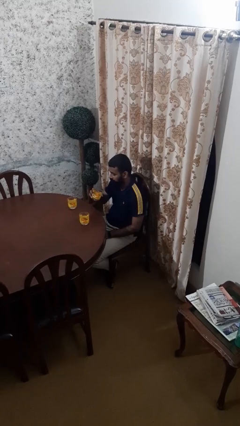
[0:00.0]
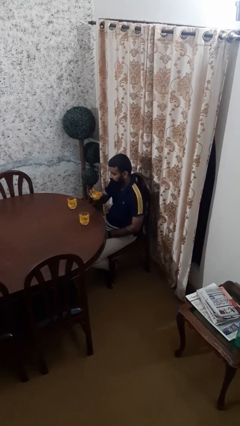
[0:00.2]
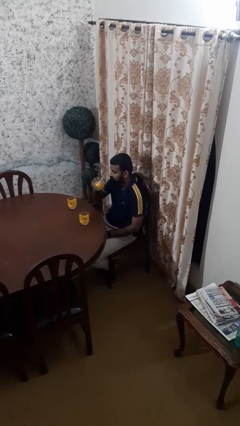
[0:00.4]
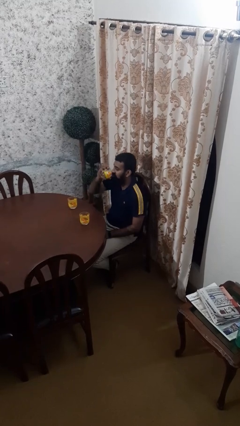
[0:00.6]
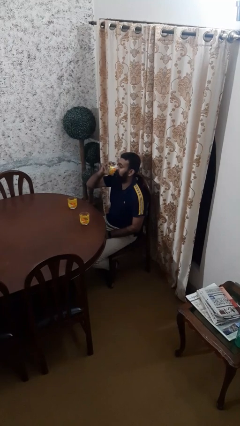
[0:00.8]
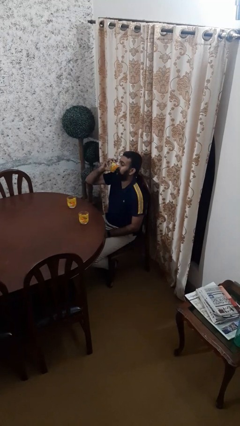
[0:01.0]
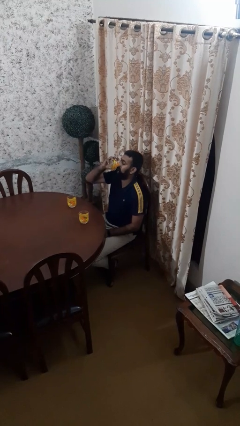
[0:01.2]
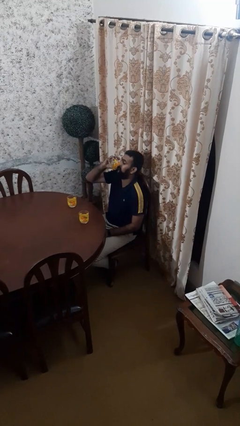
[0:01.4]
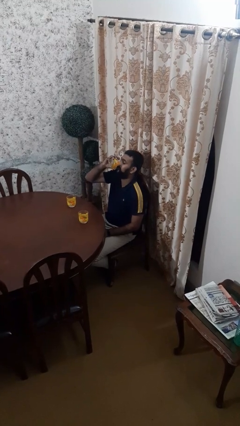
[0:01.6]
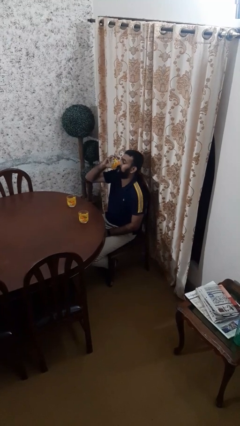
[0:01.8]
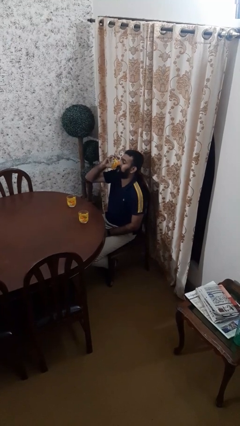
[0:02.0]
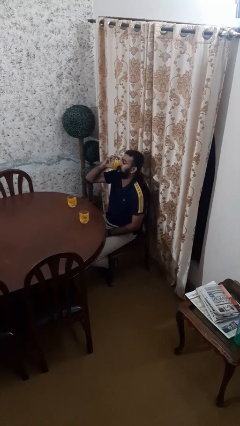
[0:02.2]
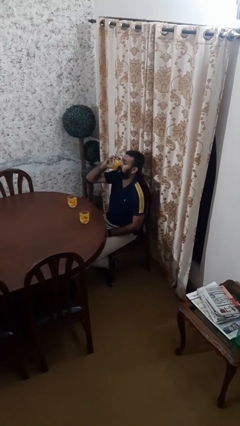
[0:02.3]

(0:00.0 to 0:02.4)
person drinks from shotglass

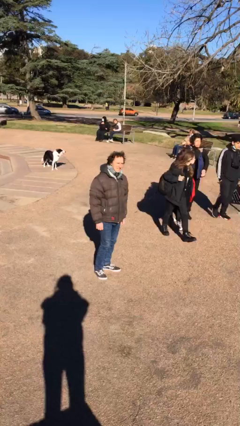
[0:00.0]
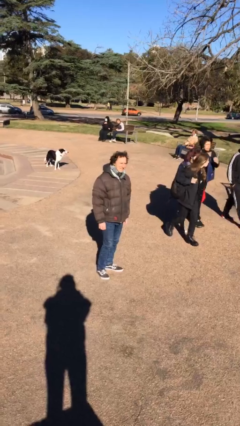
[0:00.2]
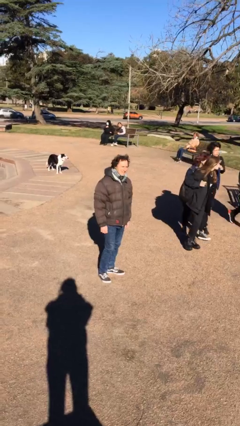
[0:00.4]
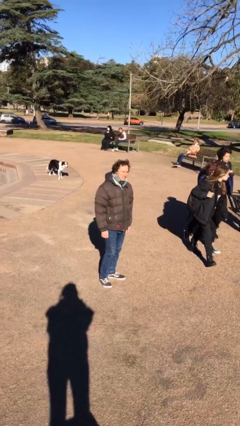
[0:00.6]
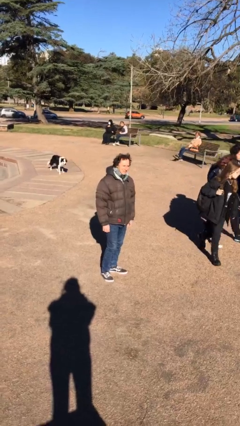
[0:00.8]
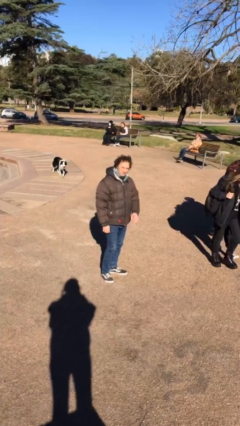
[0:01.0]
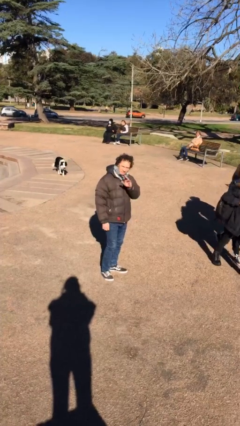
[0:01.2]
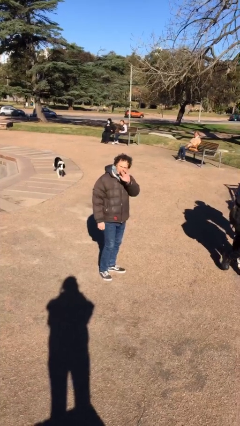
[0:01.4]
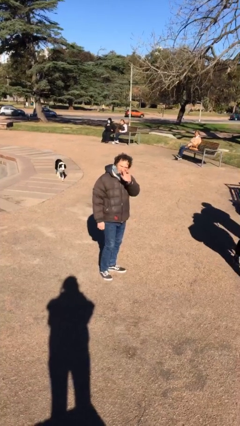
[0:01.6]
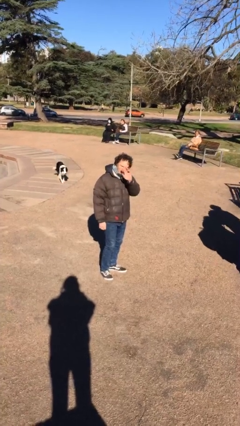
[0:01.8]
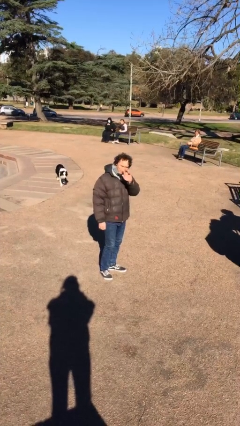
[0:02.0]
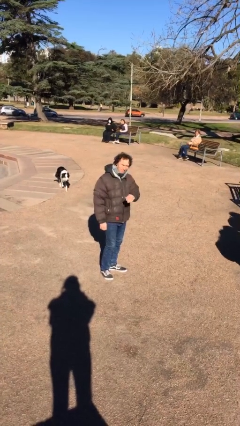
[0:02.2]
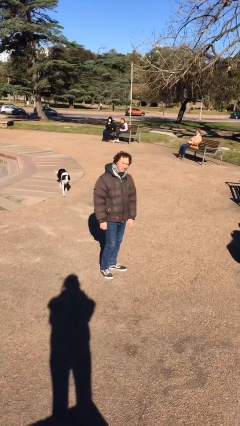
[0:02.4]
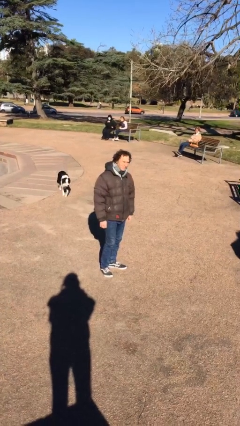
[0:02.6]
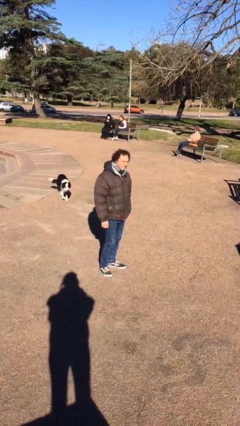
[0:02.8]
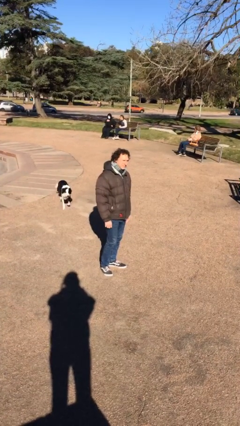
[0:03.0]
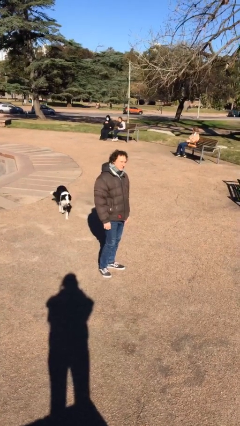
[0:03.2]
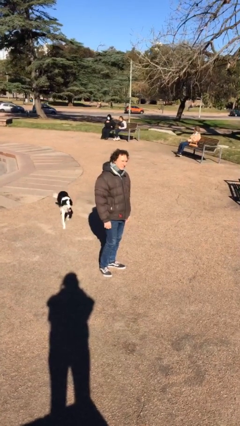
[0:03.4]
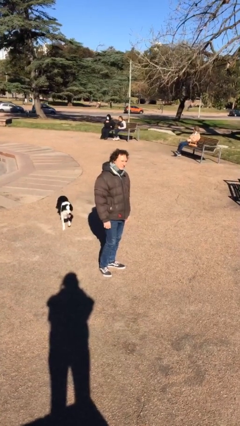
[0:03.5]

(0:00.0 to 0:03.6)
person waves at person

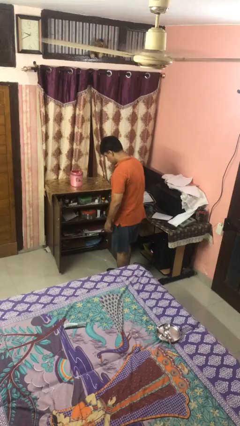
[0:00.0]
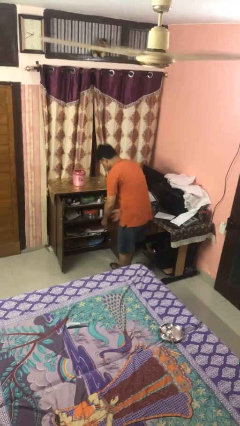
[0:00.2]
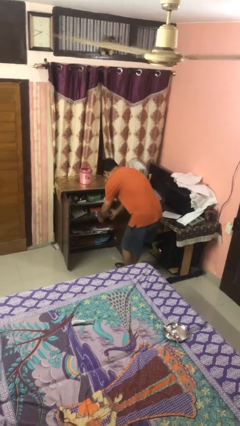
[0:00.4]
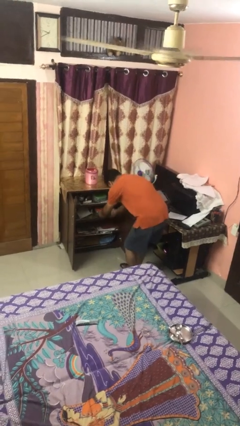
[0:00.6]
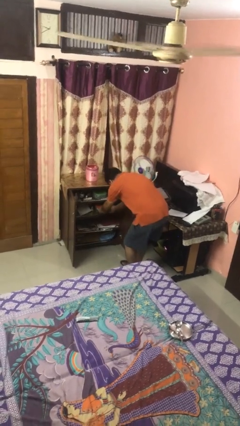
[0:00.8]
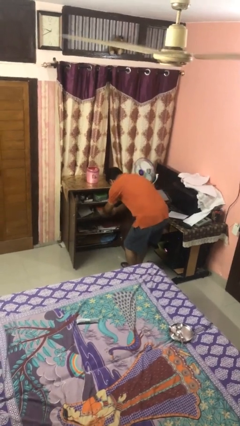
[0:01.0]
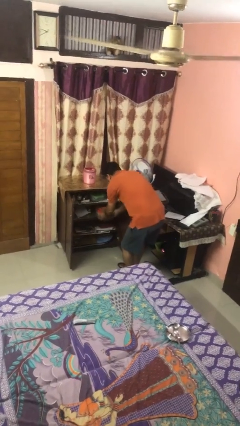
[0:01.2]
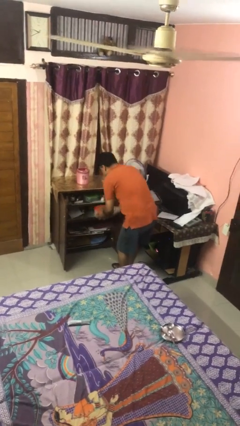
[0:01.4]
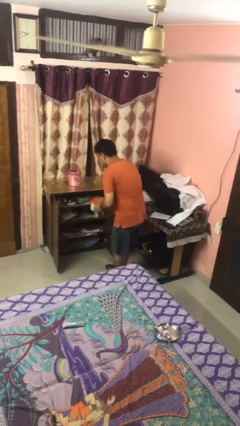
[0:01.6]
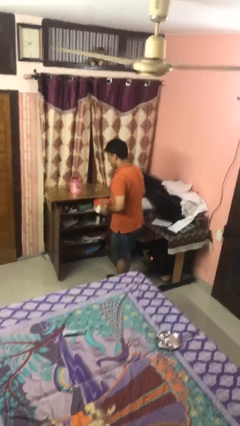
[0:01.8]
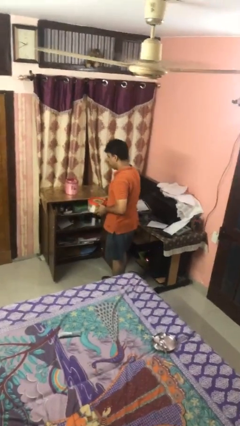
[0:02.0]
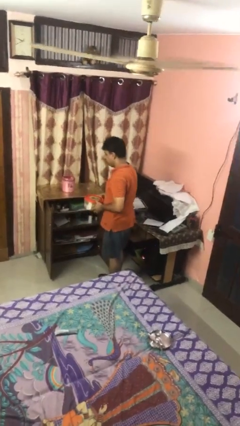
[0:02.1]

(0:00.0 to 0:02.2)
person picks up object from cabinet

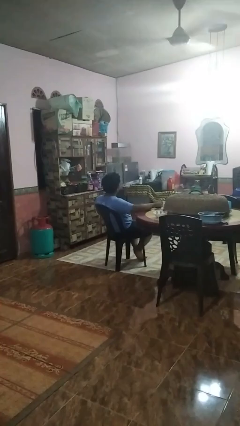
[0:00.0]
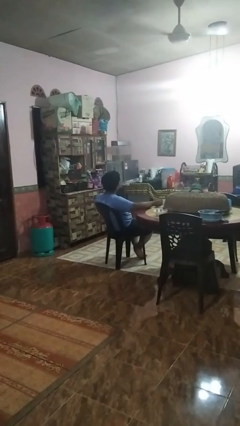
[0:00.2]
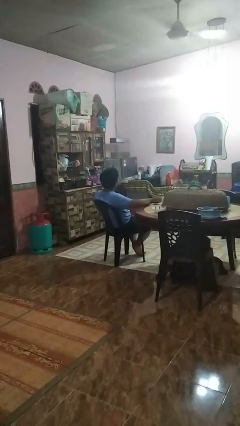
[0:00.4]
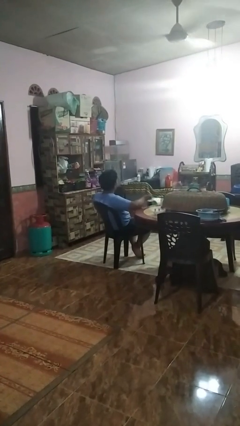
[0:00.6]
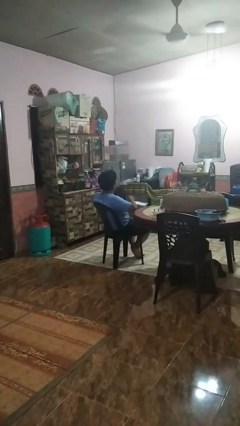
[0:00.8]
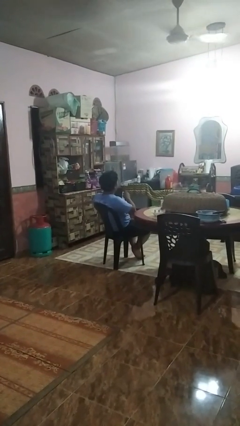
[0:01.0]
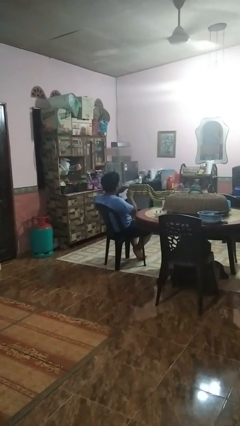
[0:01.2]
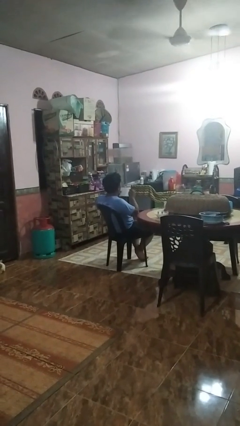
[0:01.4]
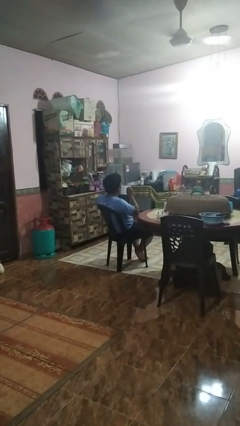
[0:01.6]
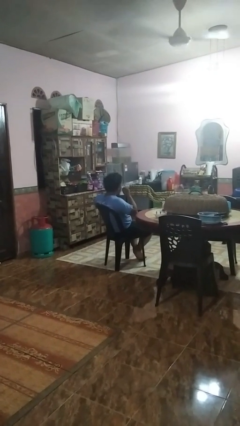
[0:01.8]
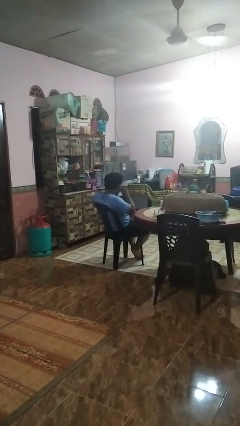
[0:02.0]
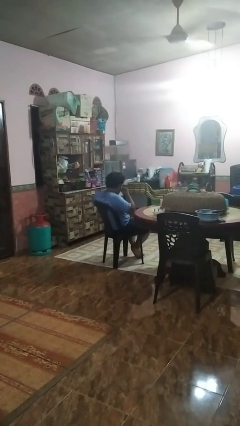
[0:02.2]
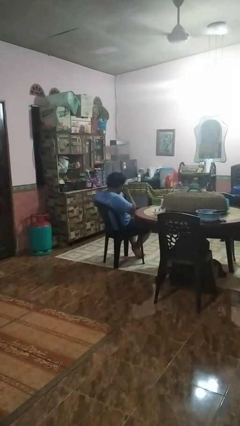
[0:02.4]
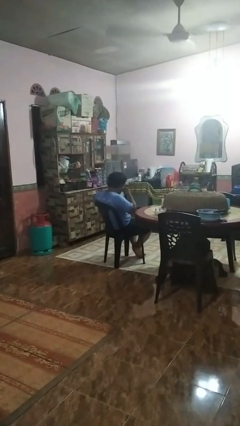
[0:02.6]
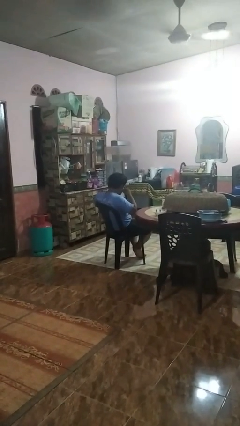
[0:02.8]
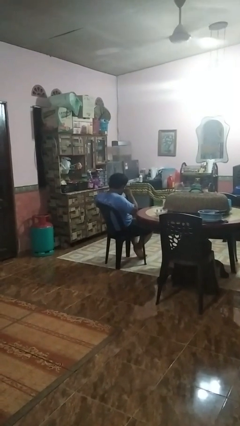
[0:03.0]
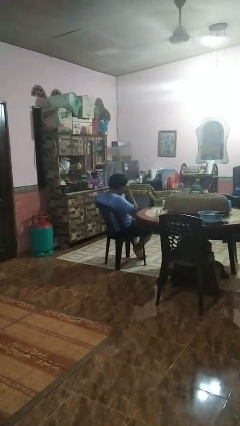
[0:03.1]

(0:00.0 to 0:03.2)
person blows nose

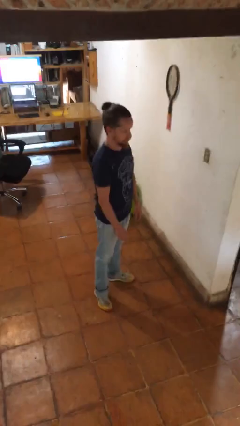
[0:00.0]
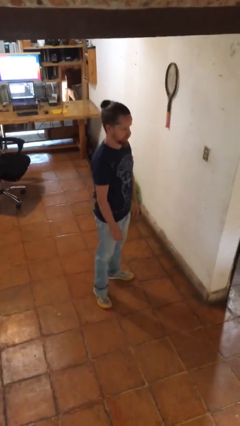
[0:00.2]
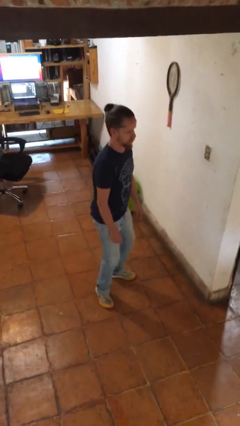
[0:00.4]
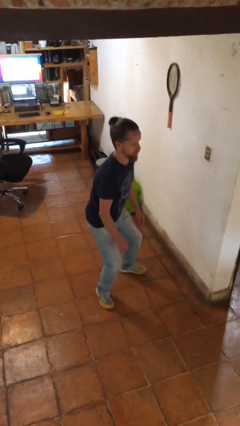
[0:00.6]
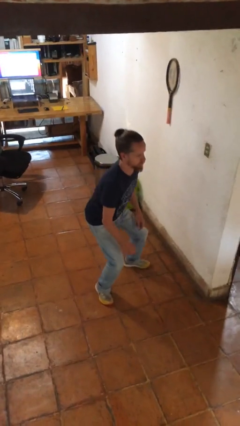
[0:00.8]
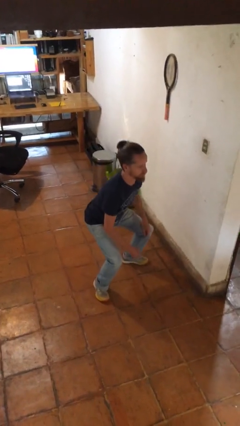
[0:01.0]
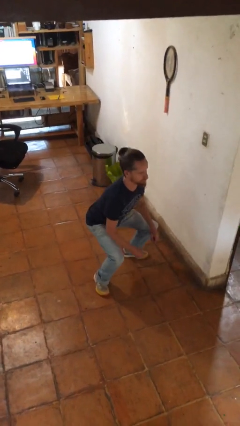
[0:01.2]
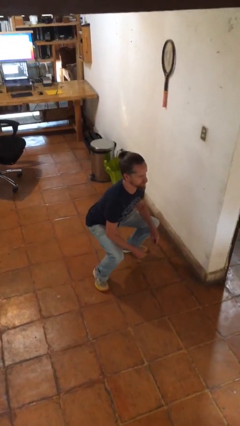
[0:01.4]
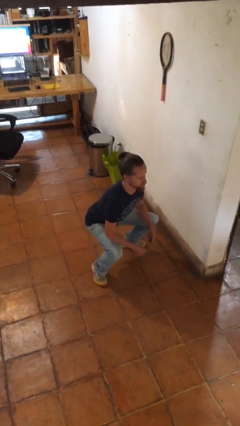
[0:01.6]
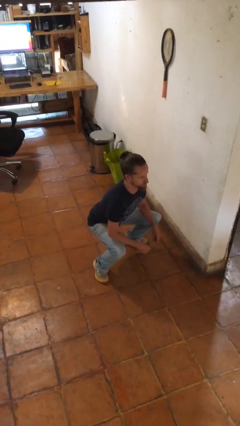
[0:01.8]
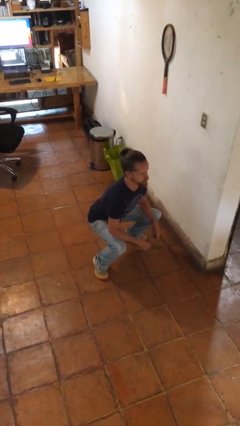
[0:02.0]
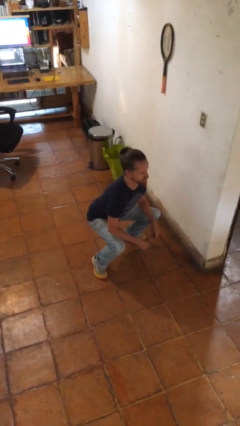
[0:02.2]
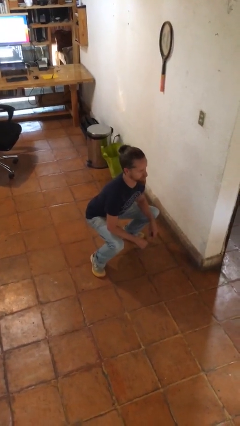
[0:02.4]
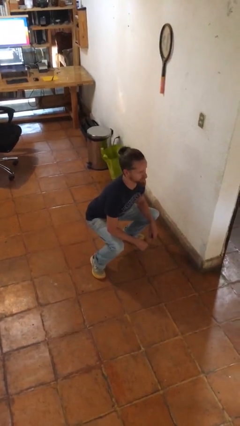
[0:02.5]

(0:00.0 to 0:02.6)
person squats

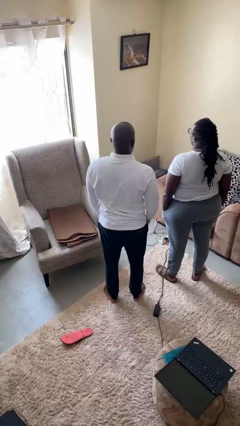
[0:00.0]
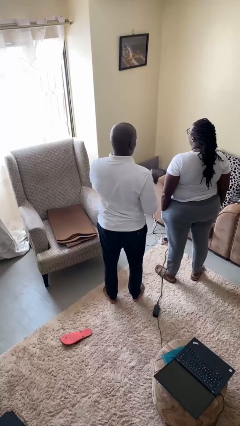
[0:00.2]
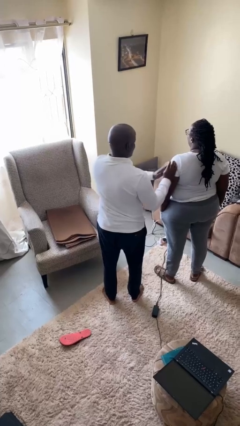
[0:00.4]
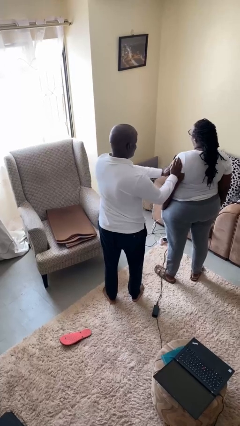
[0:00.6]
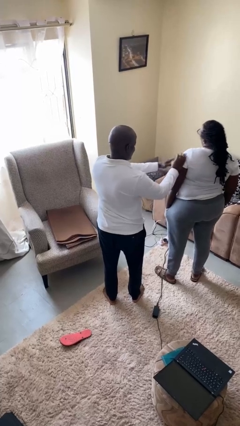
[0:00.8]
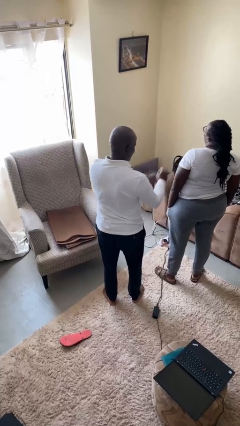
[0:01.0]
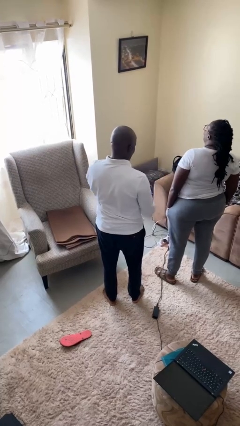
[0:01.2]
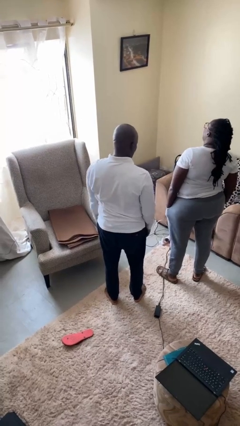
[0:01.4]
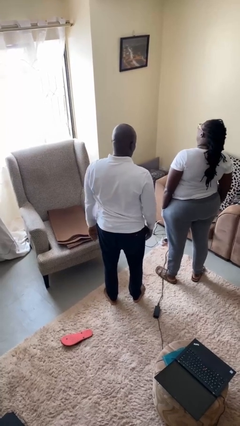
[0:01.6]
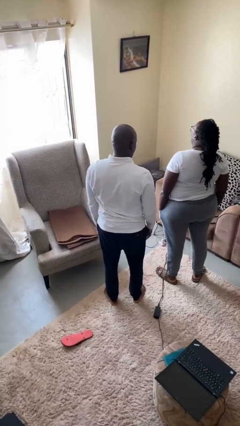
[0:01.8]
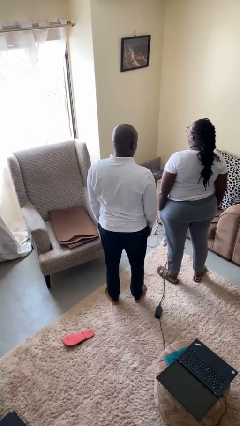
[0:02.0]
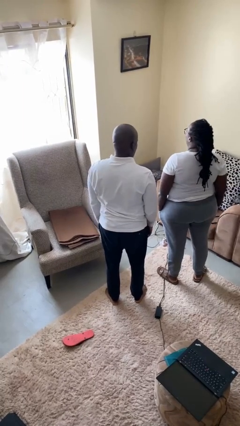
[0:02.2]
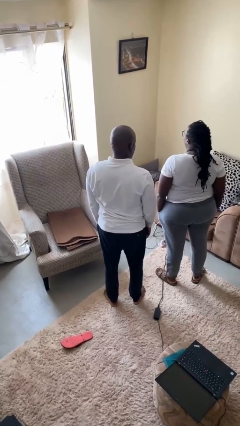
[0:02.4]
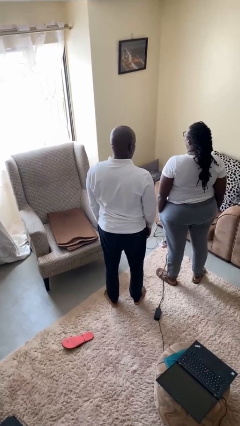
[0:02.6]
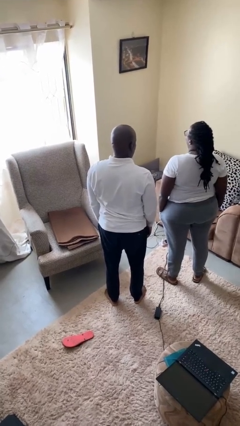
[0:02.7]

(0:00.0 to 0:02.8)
person shoves person
